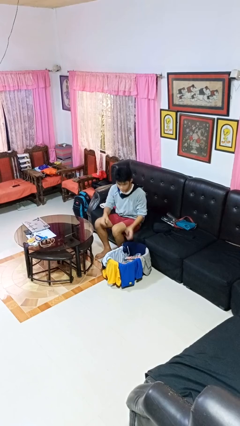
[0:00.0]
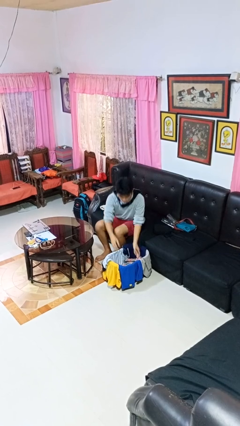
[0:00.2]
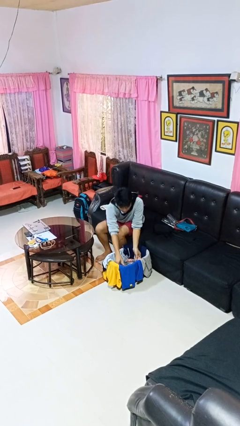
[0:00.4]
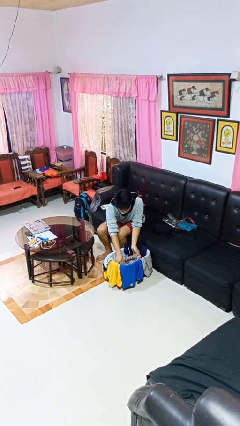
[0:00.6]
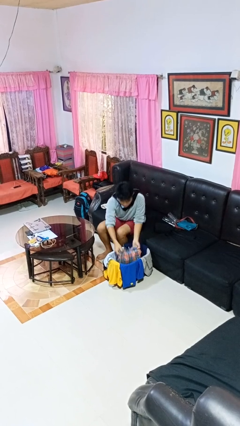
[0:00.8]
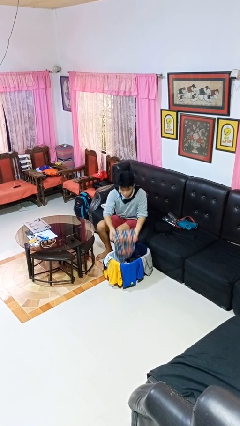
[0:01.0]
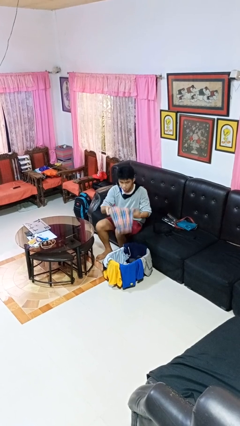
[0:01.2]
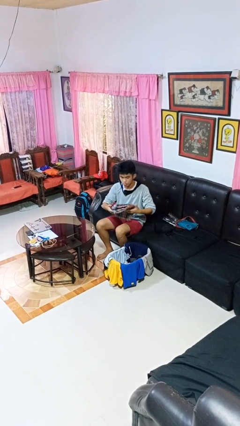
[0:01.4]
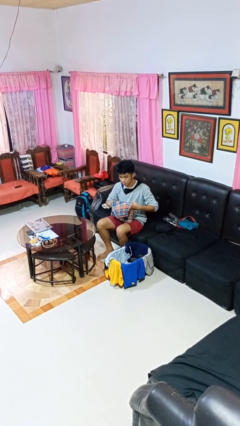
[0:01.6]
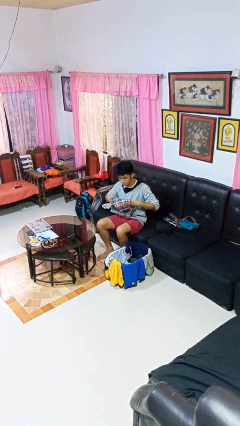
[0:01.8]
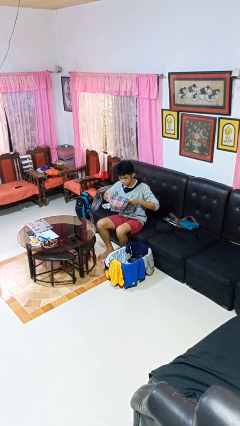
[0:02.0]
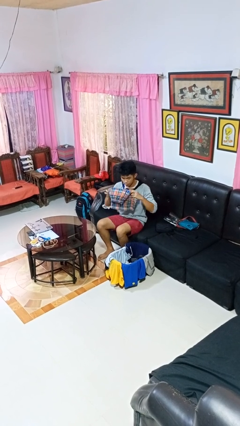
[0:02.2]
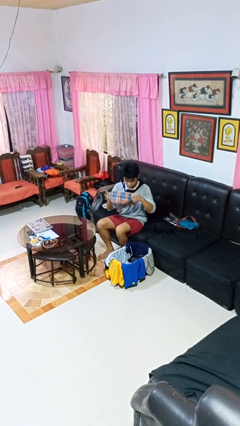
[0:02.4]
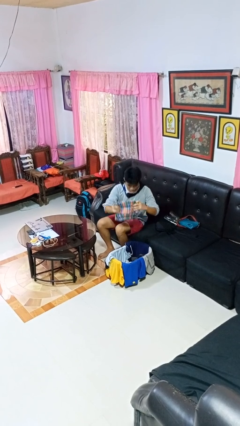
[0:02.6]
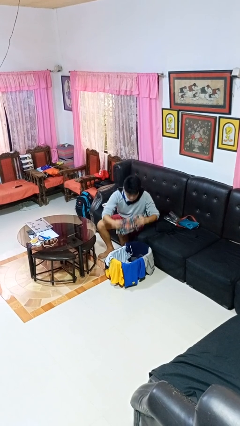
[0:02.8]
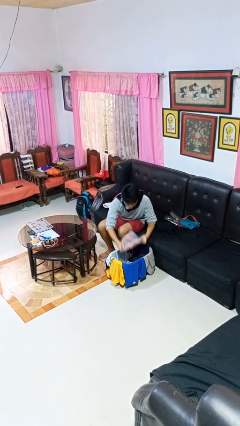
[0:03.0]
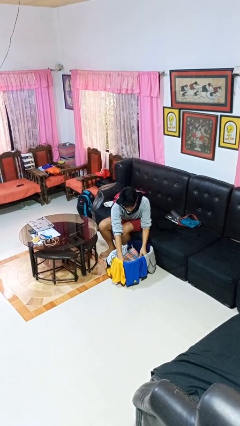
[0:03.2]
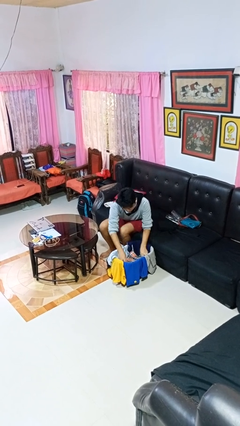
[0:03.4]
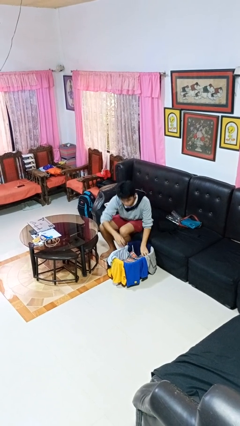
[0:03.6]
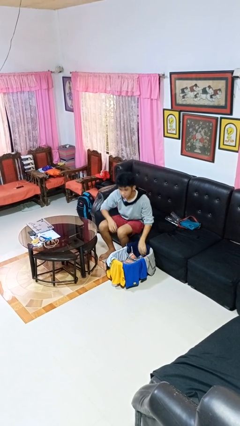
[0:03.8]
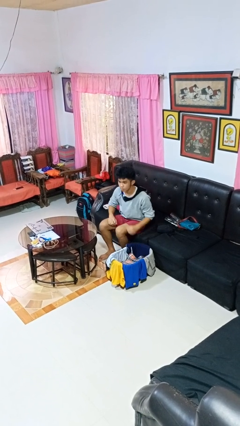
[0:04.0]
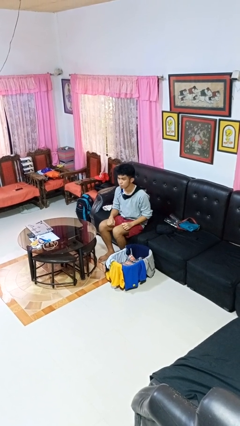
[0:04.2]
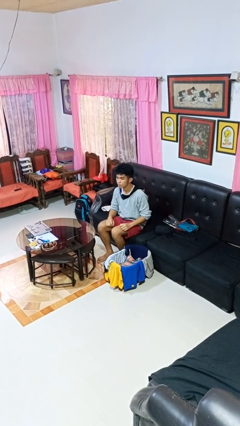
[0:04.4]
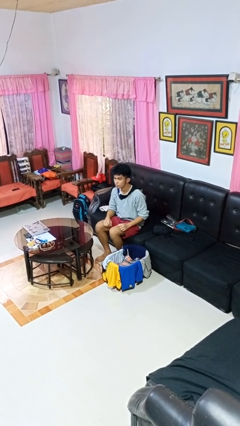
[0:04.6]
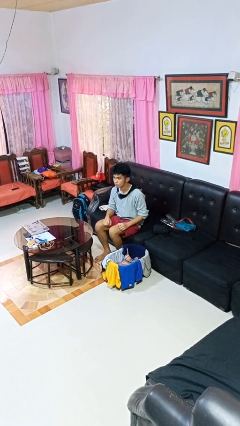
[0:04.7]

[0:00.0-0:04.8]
person folds pants

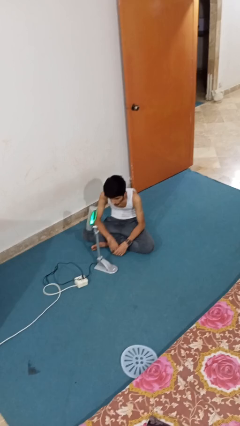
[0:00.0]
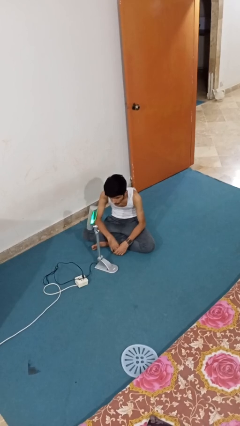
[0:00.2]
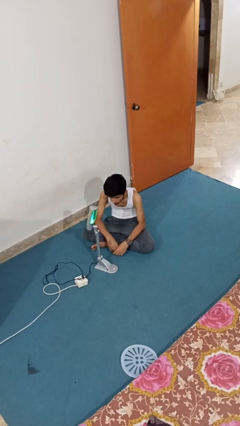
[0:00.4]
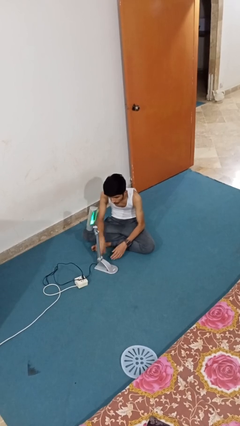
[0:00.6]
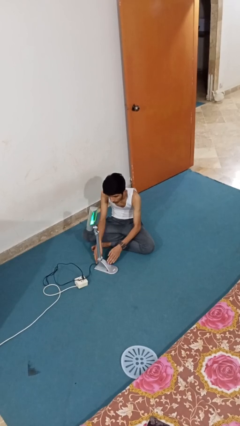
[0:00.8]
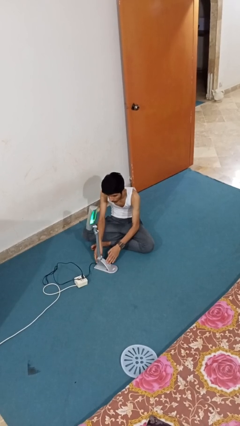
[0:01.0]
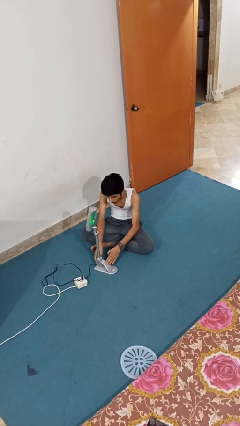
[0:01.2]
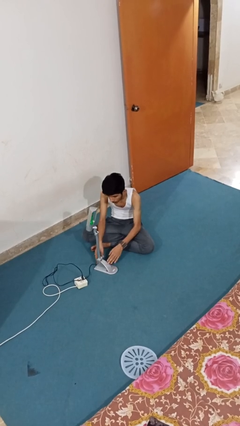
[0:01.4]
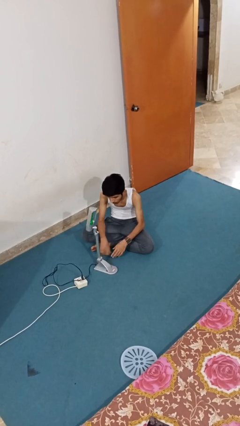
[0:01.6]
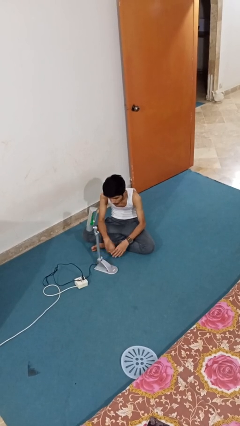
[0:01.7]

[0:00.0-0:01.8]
person turns off lamp

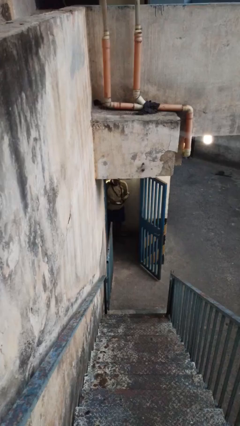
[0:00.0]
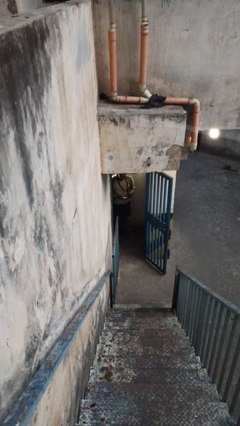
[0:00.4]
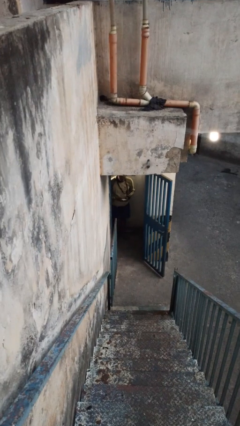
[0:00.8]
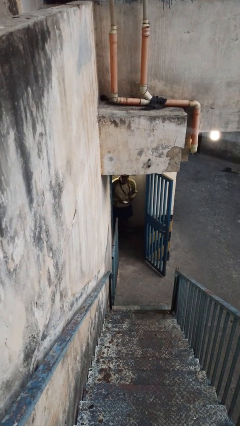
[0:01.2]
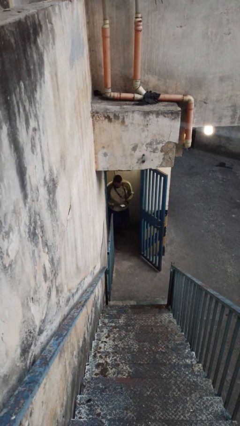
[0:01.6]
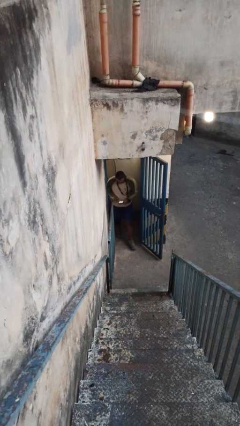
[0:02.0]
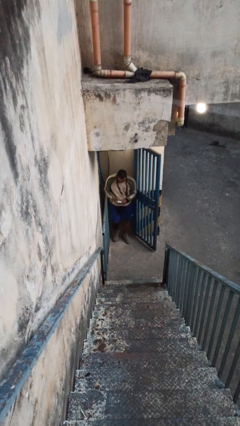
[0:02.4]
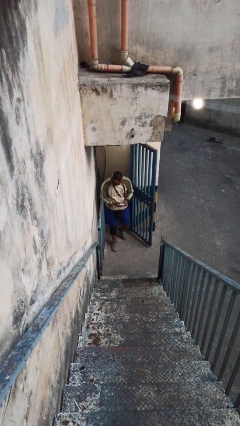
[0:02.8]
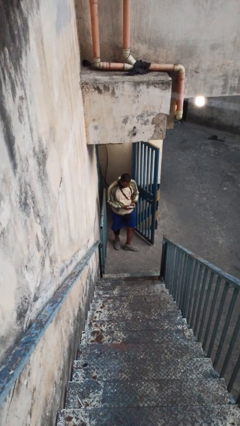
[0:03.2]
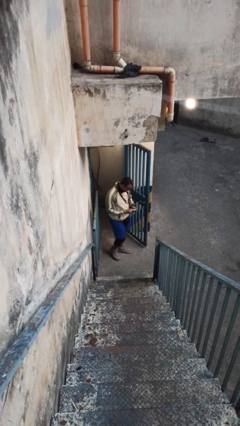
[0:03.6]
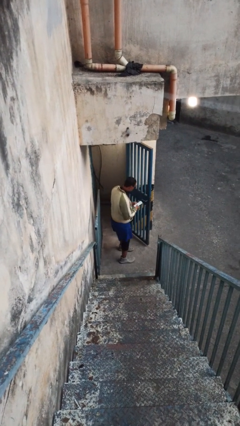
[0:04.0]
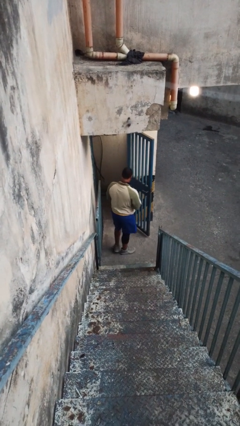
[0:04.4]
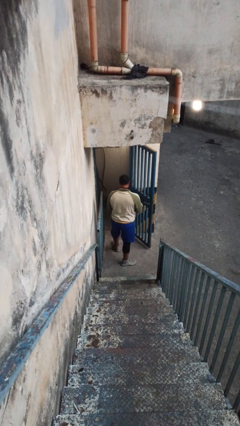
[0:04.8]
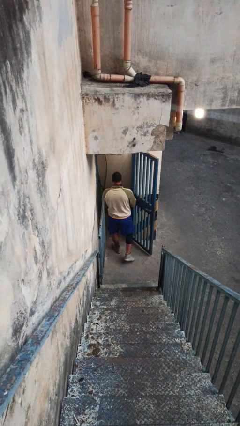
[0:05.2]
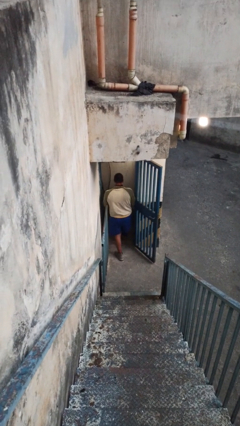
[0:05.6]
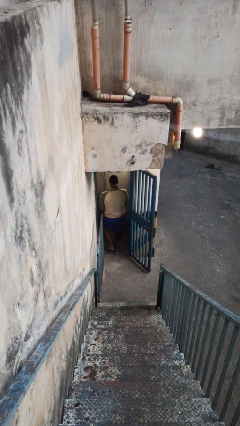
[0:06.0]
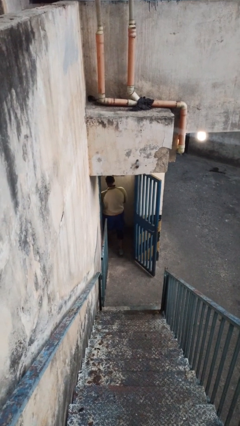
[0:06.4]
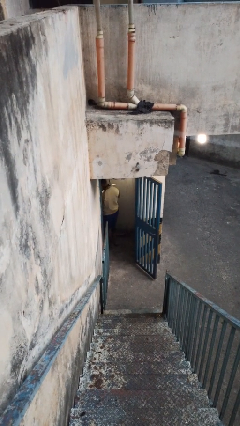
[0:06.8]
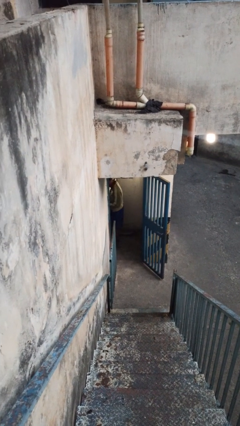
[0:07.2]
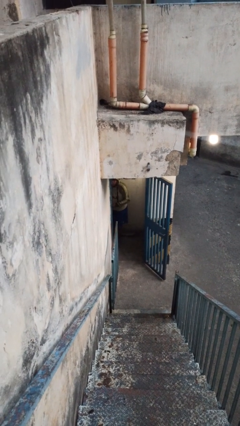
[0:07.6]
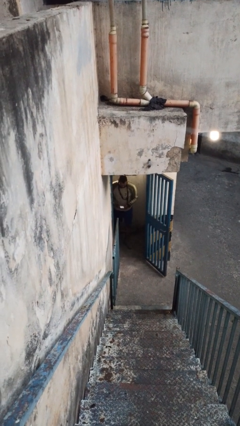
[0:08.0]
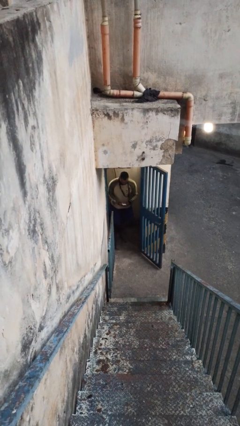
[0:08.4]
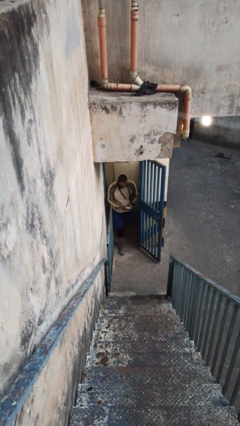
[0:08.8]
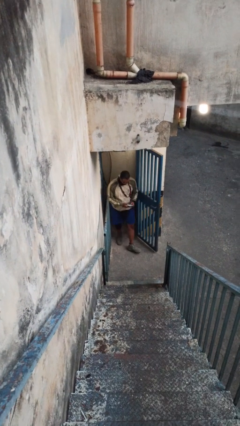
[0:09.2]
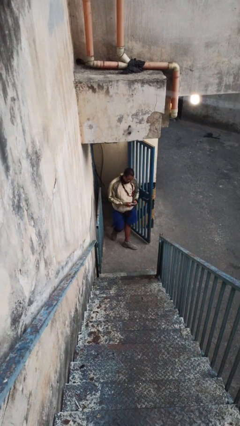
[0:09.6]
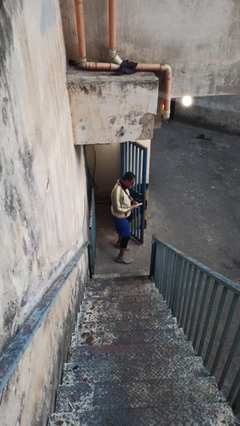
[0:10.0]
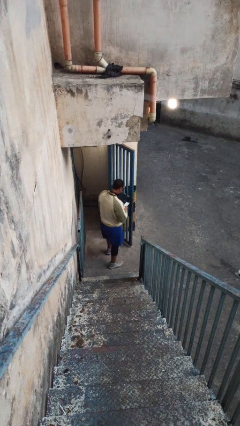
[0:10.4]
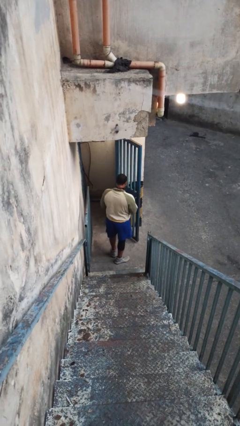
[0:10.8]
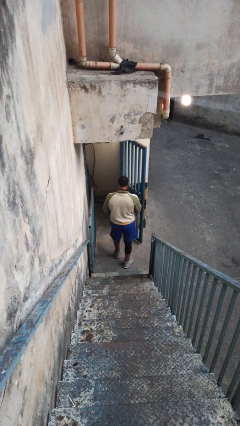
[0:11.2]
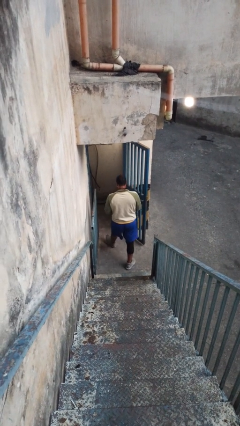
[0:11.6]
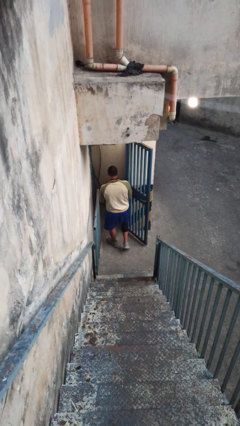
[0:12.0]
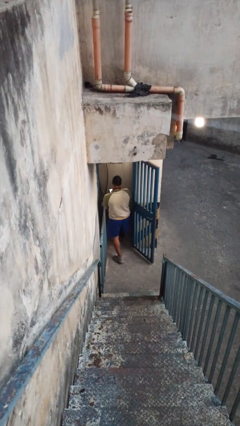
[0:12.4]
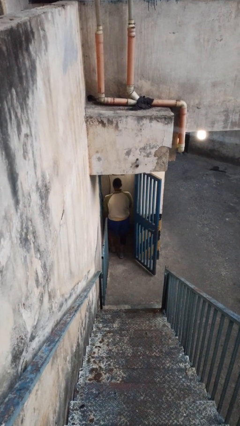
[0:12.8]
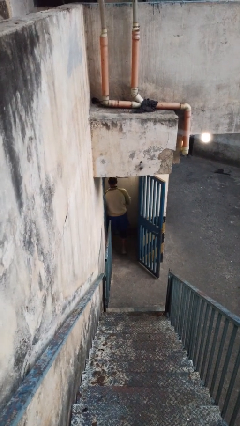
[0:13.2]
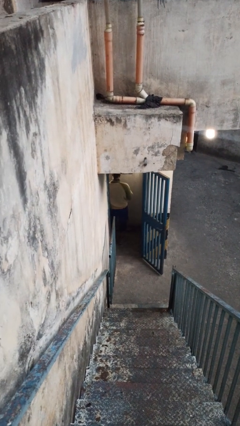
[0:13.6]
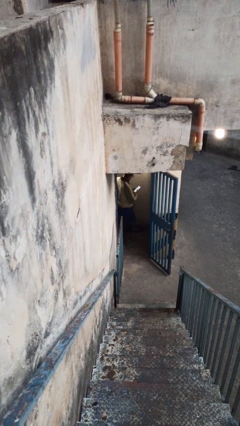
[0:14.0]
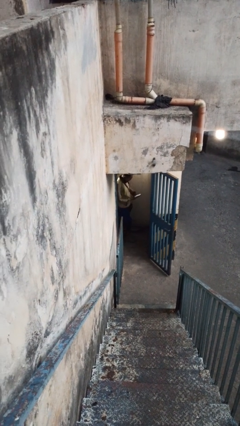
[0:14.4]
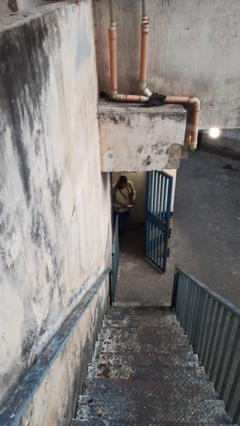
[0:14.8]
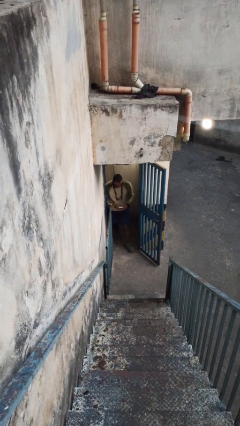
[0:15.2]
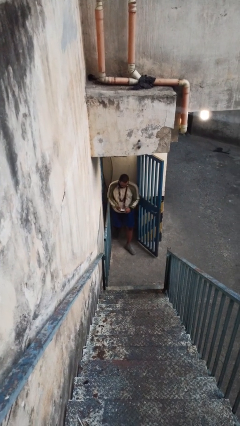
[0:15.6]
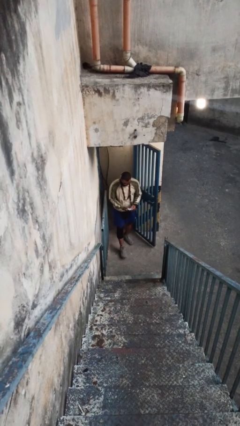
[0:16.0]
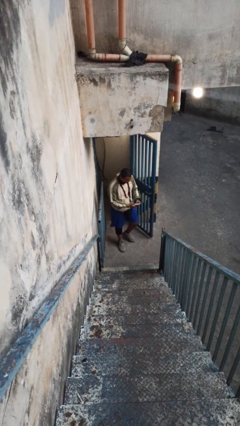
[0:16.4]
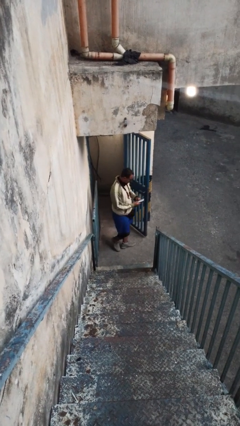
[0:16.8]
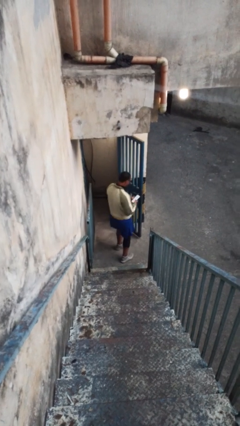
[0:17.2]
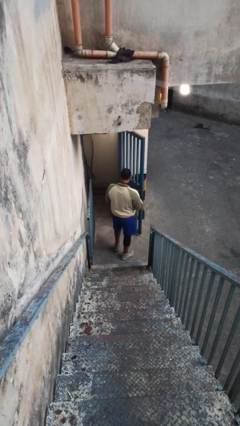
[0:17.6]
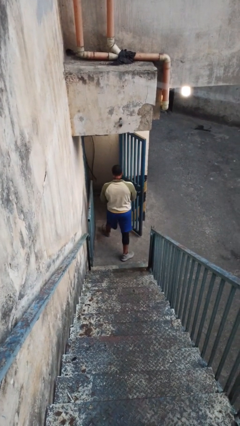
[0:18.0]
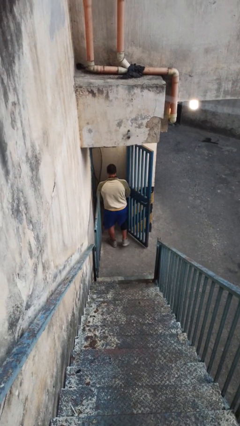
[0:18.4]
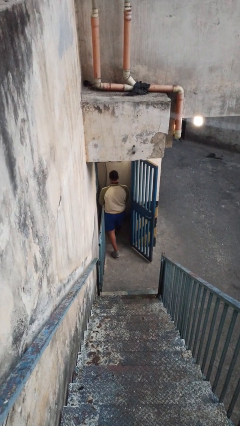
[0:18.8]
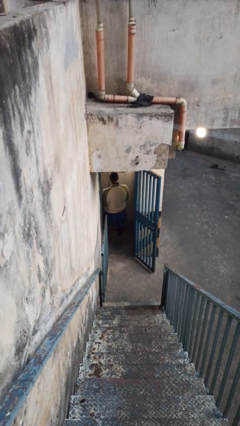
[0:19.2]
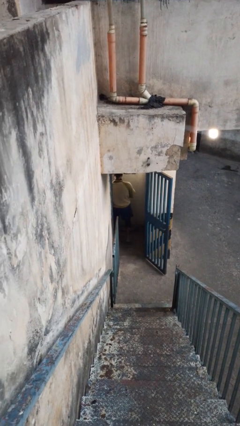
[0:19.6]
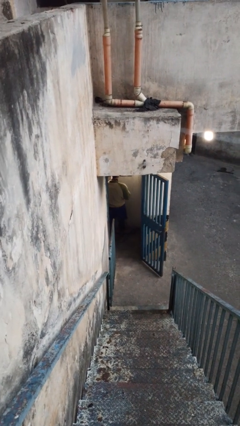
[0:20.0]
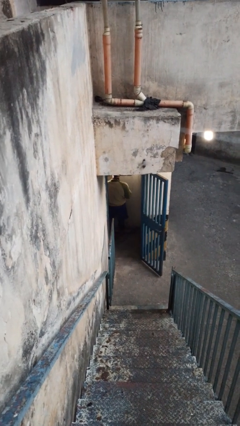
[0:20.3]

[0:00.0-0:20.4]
person texts on phone

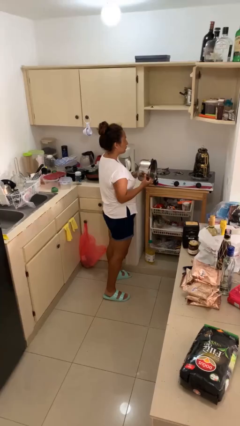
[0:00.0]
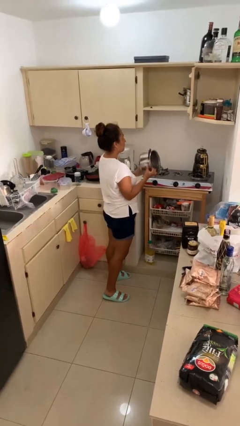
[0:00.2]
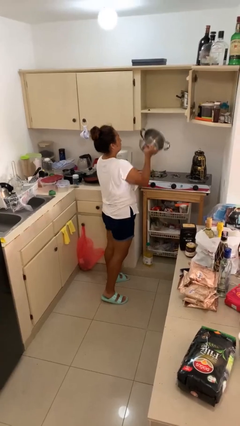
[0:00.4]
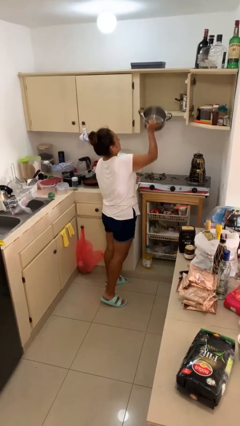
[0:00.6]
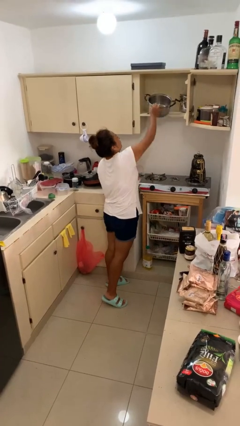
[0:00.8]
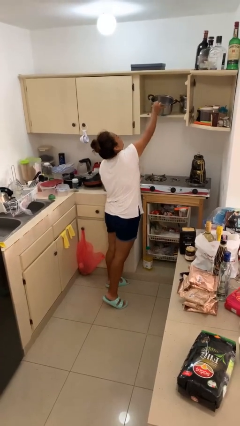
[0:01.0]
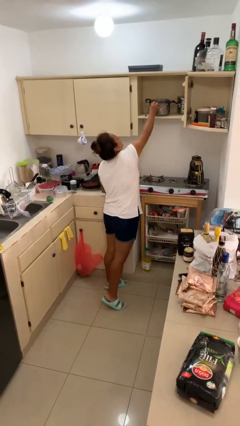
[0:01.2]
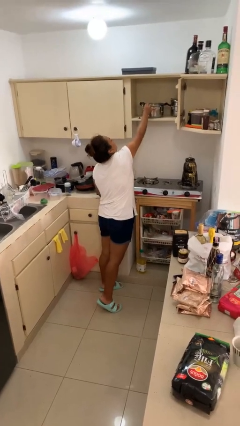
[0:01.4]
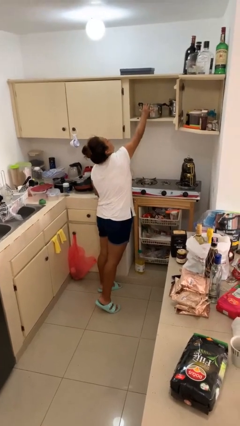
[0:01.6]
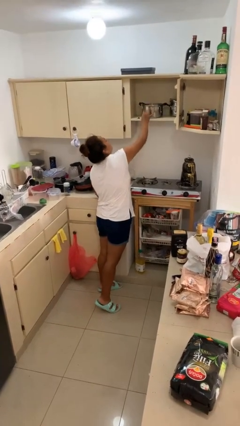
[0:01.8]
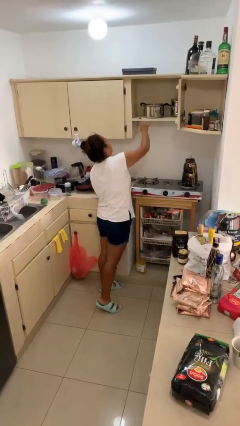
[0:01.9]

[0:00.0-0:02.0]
person puts down object into cabinet
